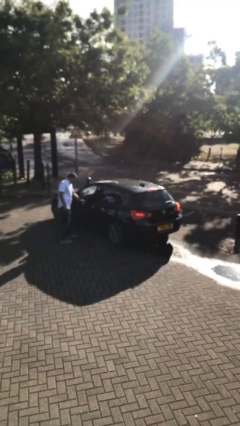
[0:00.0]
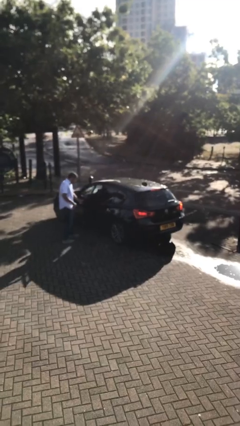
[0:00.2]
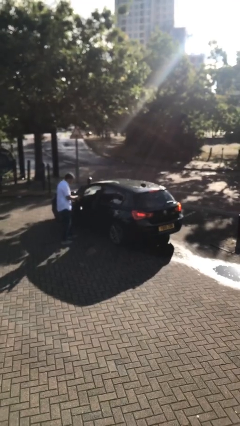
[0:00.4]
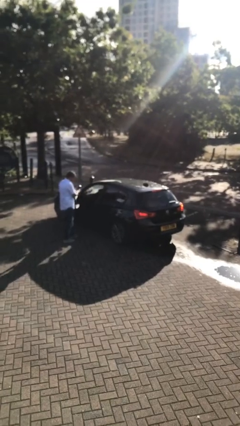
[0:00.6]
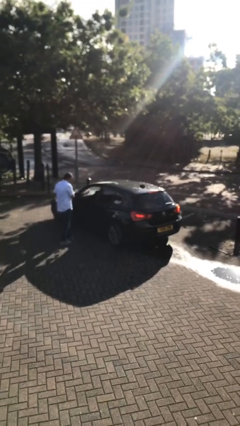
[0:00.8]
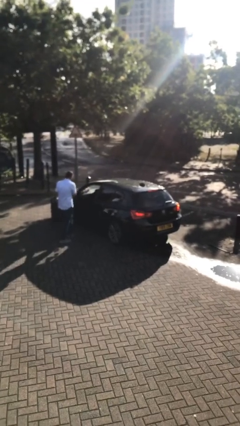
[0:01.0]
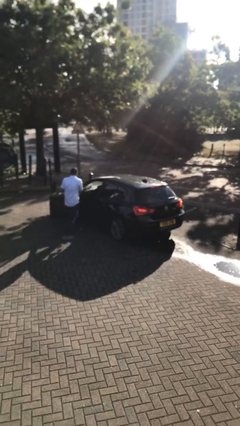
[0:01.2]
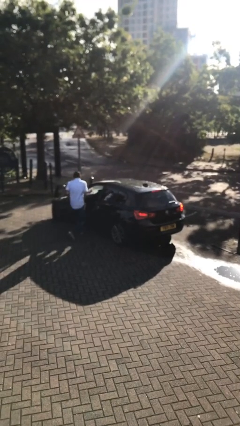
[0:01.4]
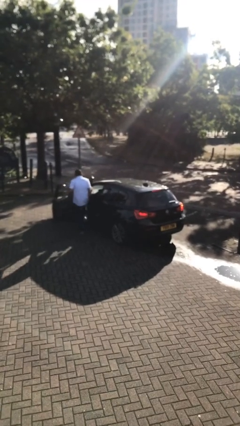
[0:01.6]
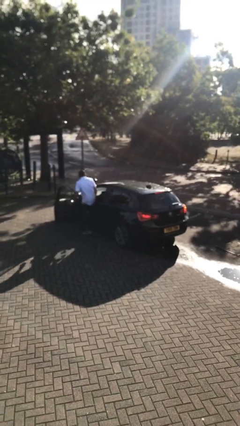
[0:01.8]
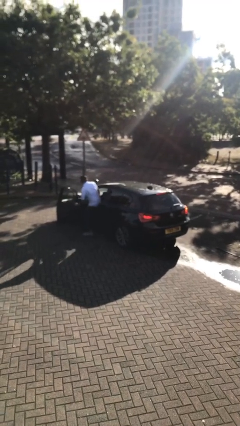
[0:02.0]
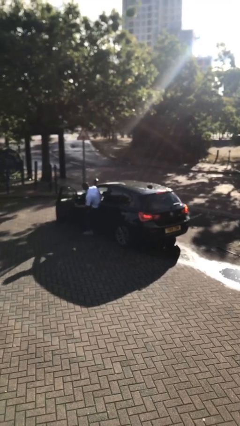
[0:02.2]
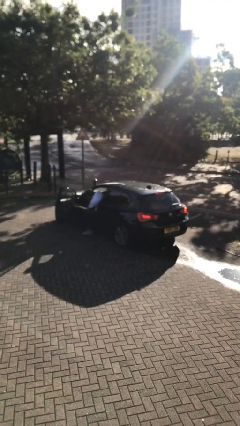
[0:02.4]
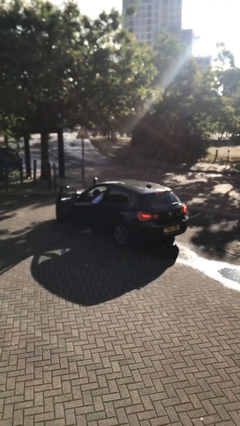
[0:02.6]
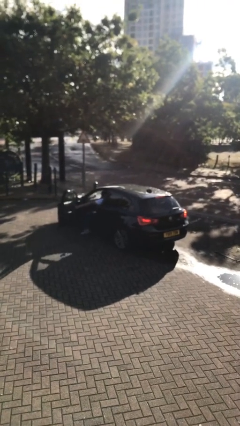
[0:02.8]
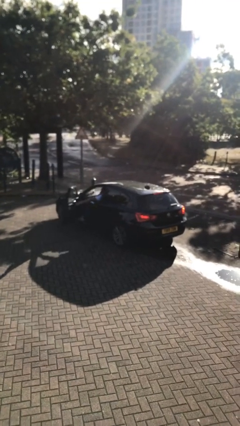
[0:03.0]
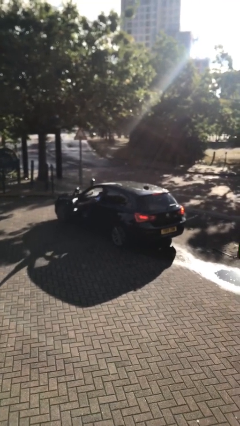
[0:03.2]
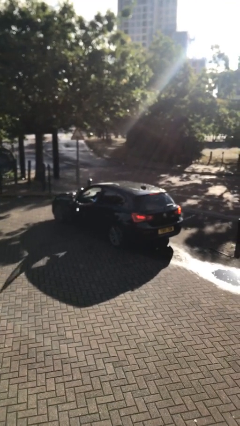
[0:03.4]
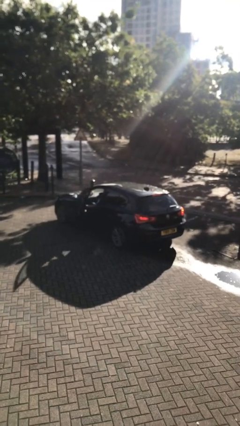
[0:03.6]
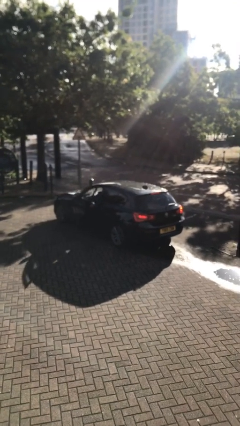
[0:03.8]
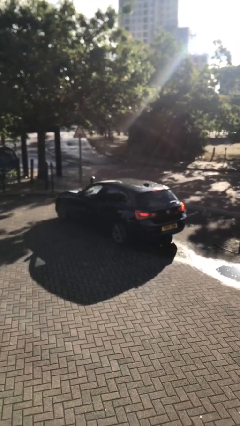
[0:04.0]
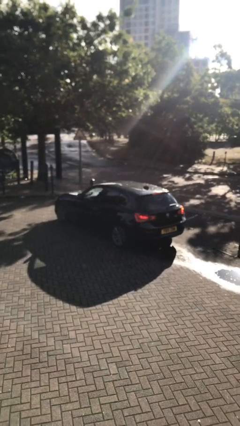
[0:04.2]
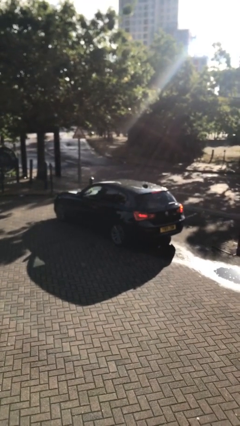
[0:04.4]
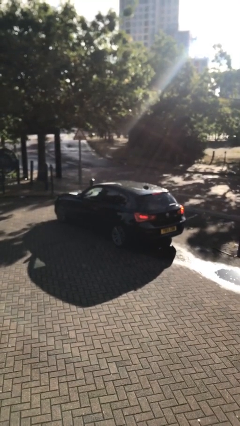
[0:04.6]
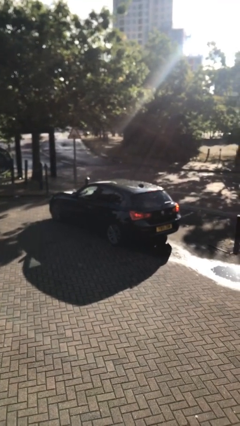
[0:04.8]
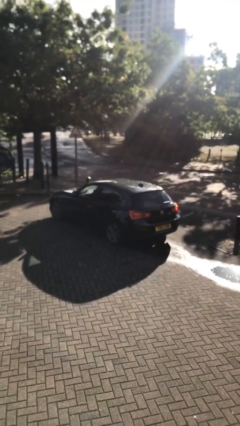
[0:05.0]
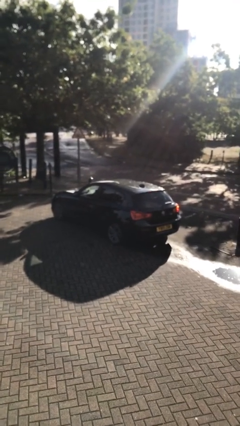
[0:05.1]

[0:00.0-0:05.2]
car picks up person

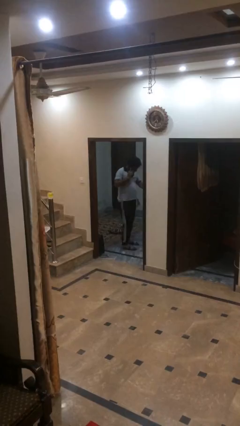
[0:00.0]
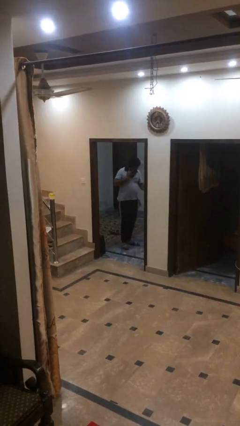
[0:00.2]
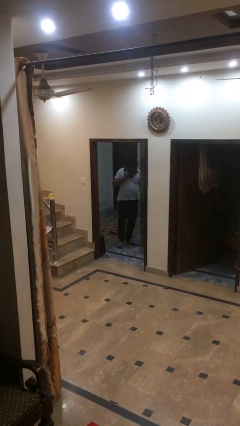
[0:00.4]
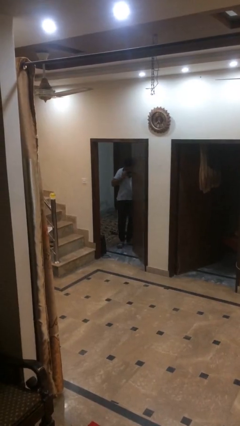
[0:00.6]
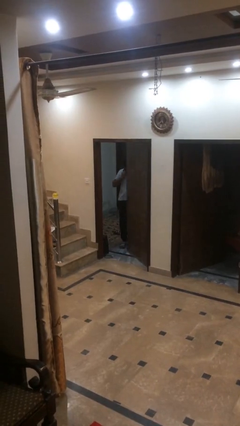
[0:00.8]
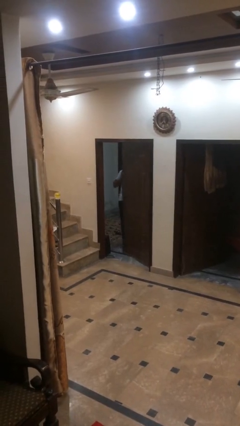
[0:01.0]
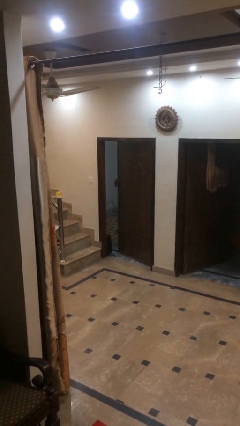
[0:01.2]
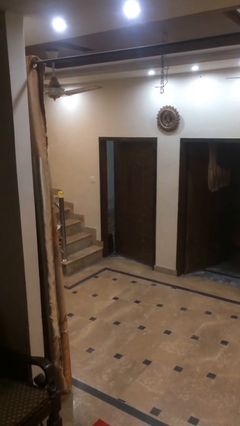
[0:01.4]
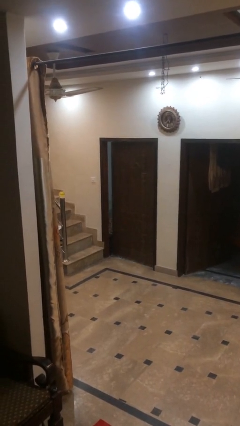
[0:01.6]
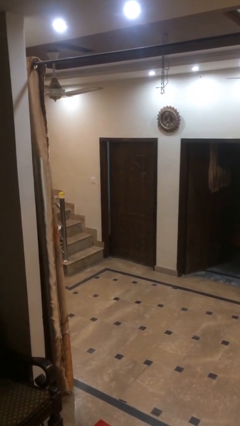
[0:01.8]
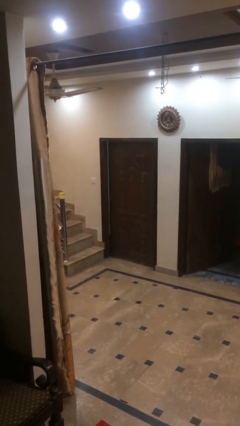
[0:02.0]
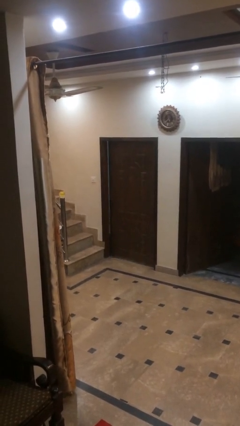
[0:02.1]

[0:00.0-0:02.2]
person closes facility door

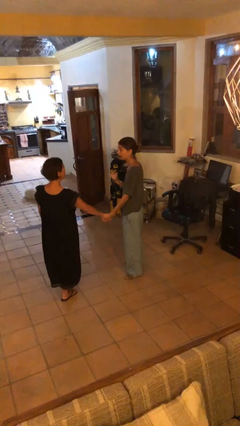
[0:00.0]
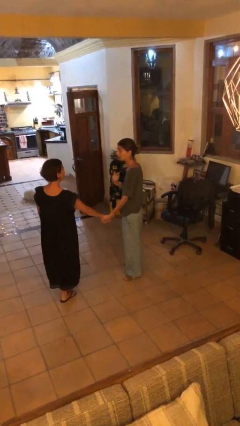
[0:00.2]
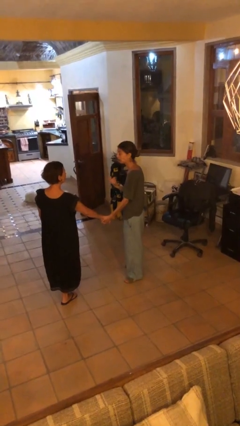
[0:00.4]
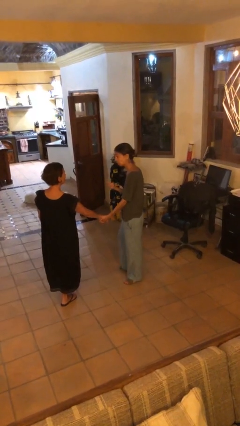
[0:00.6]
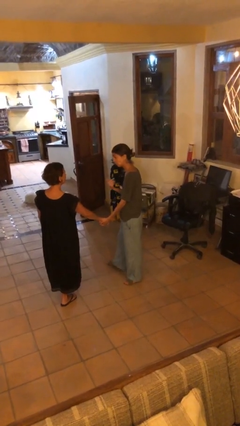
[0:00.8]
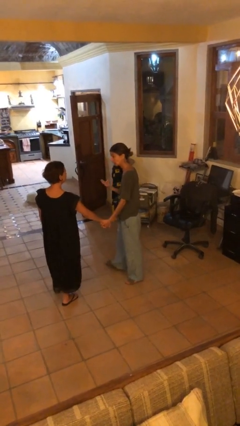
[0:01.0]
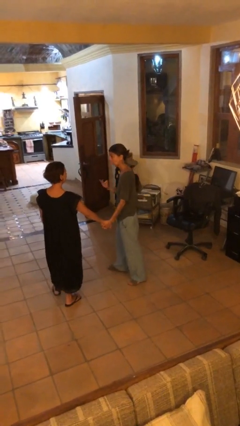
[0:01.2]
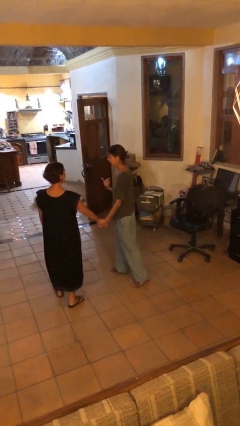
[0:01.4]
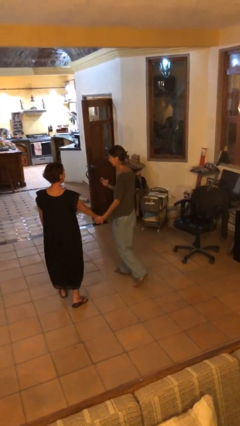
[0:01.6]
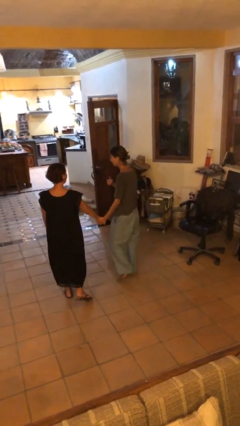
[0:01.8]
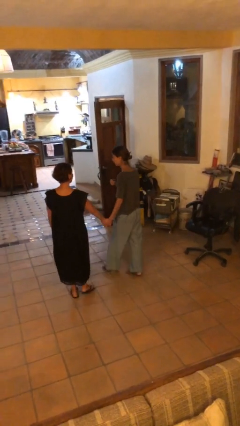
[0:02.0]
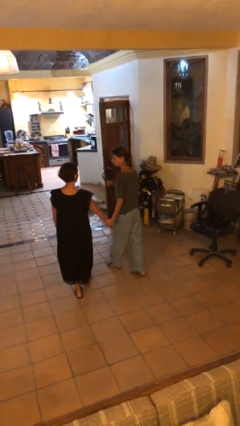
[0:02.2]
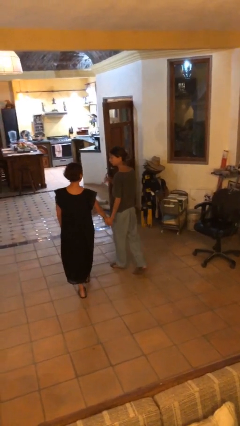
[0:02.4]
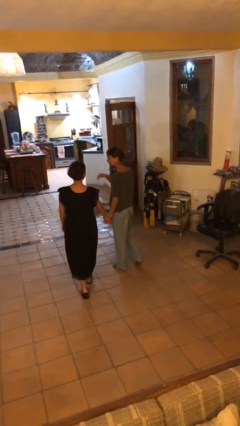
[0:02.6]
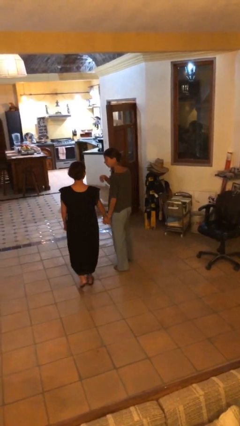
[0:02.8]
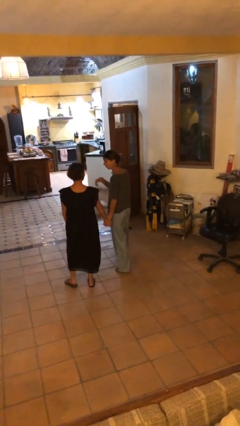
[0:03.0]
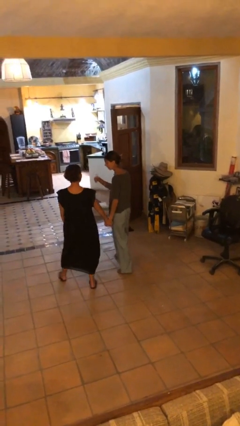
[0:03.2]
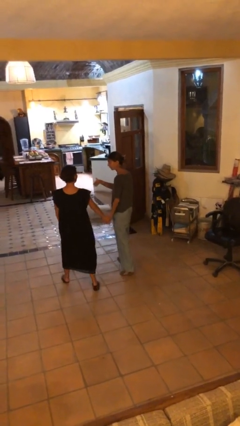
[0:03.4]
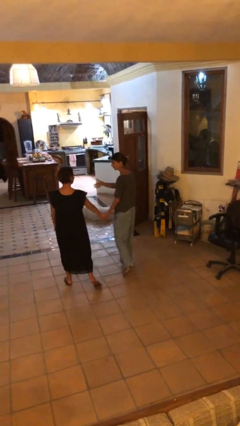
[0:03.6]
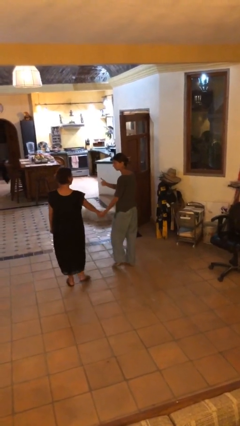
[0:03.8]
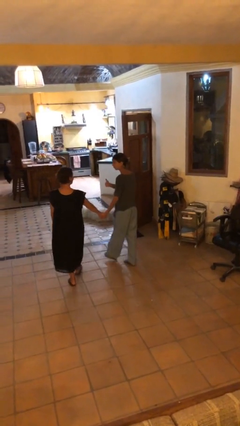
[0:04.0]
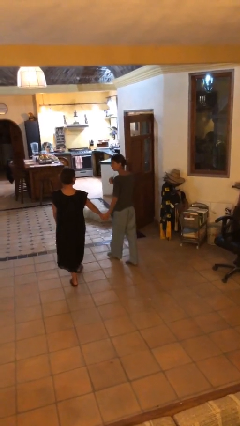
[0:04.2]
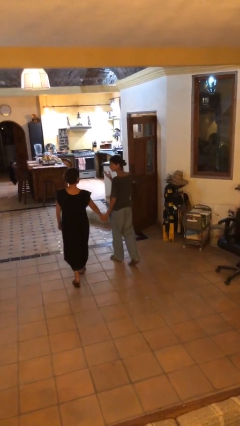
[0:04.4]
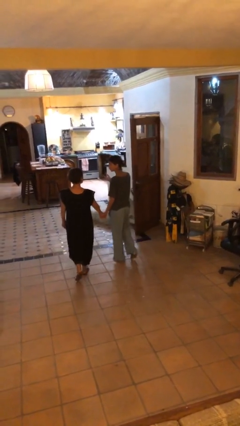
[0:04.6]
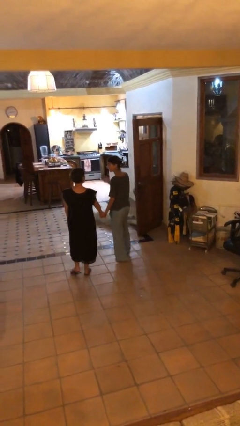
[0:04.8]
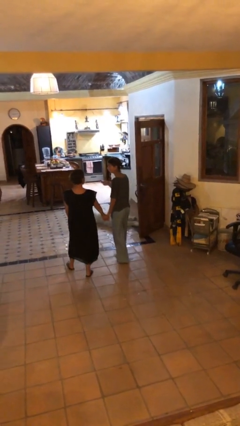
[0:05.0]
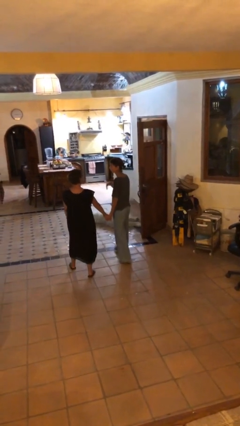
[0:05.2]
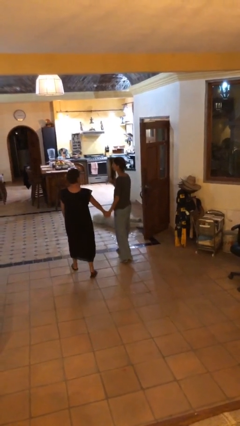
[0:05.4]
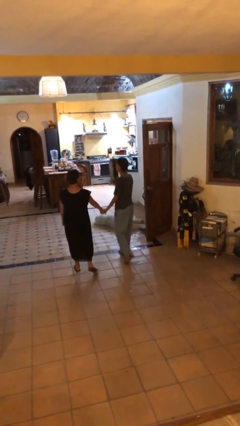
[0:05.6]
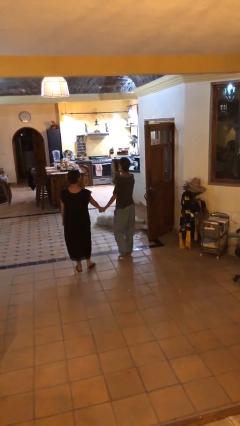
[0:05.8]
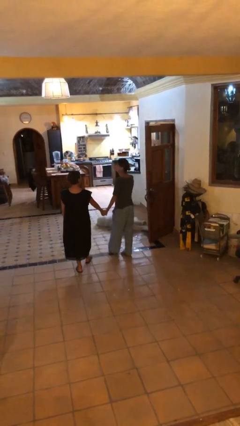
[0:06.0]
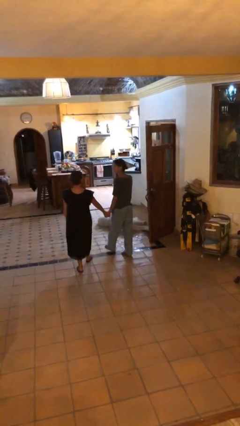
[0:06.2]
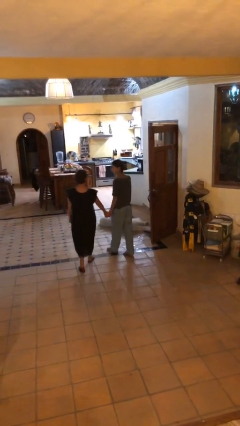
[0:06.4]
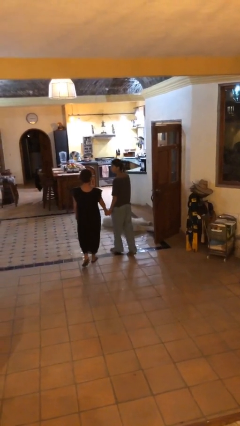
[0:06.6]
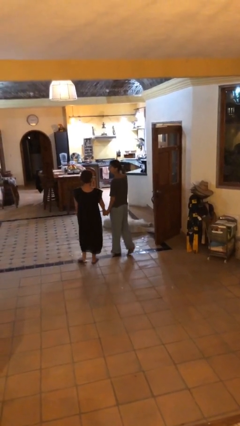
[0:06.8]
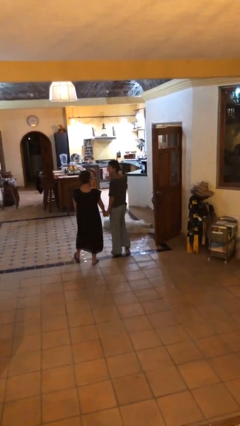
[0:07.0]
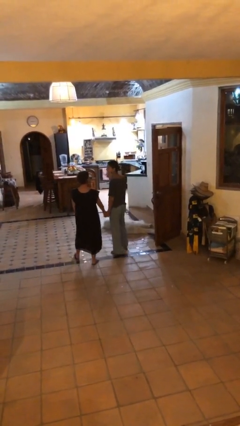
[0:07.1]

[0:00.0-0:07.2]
person holds hand

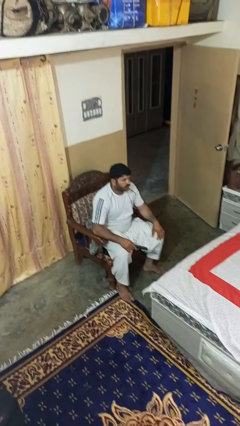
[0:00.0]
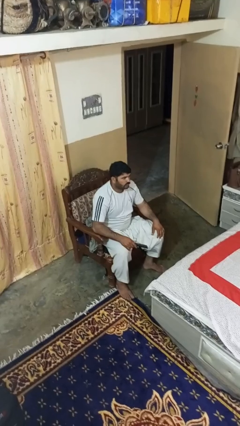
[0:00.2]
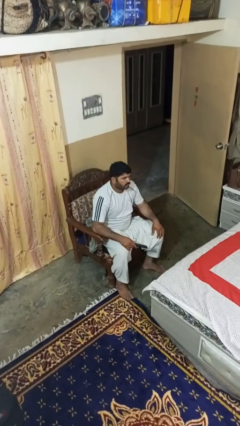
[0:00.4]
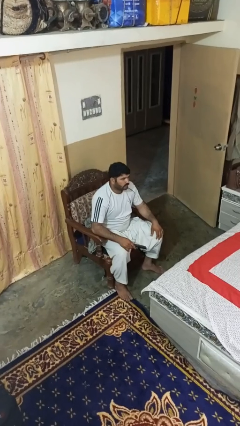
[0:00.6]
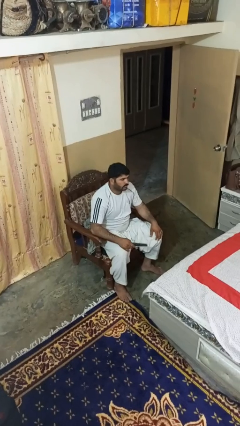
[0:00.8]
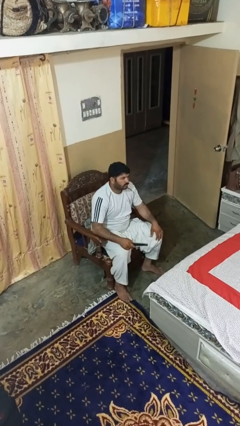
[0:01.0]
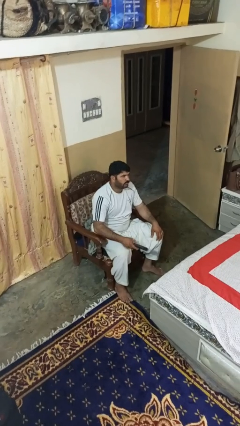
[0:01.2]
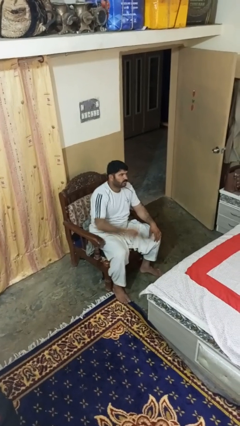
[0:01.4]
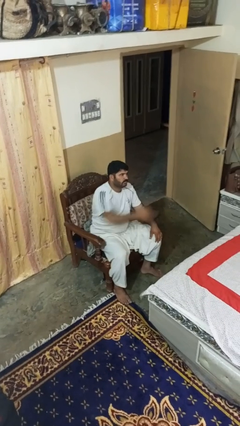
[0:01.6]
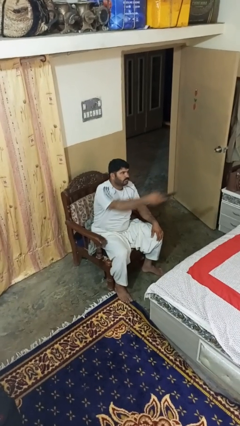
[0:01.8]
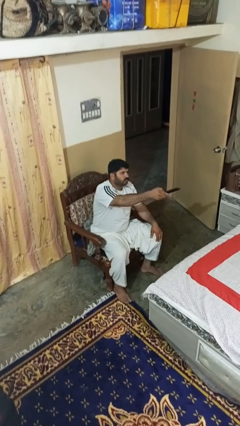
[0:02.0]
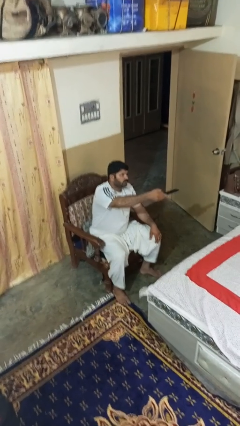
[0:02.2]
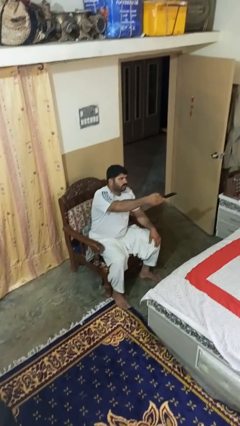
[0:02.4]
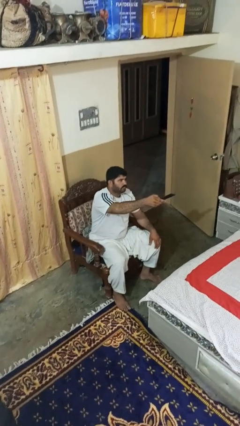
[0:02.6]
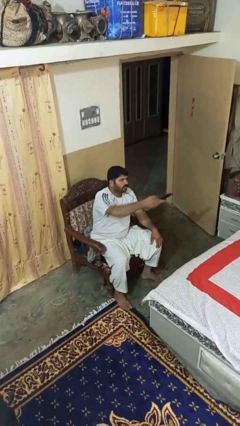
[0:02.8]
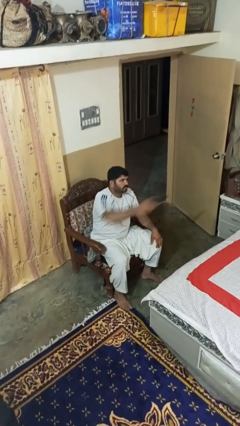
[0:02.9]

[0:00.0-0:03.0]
person uses television remote

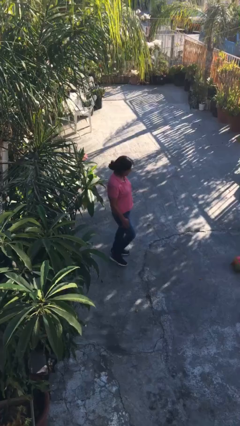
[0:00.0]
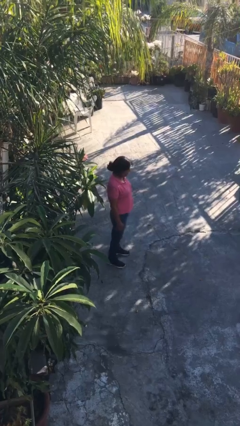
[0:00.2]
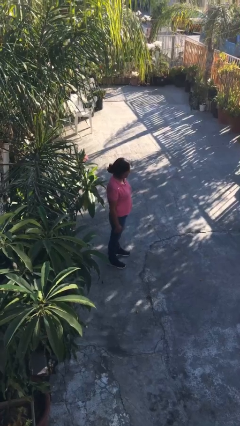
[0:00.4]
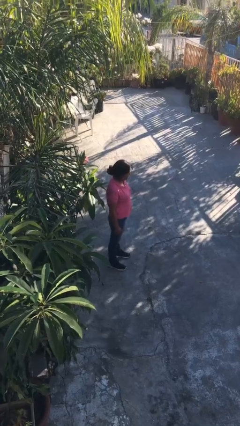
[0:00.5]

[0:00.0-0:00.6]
person kicks object to person
